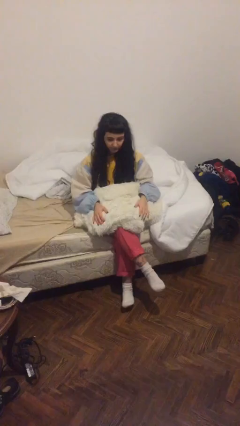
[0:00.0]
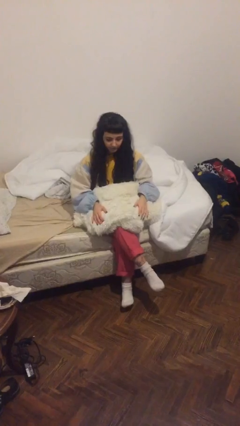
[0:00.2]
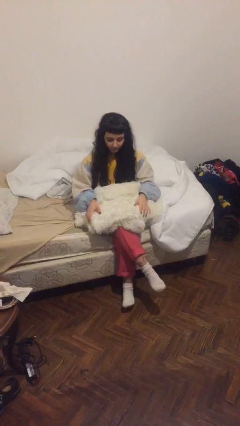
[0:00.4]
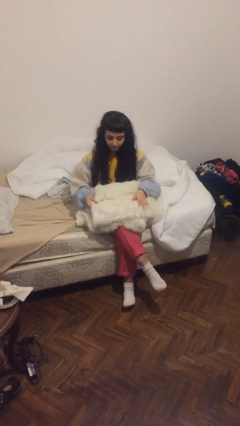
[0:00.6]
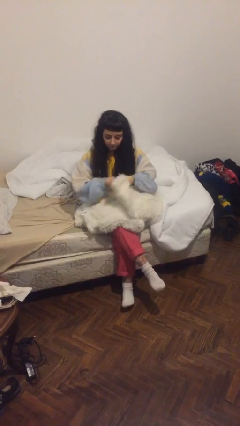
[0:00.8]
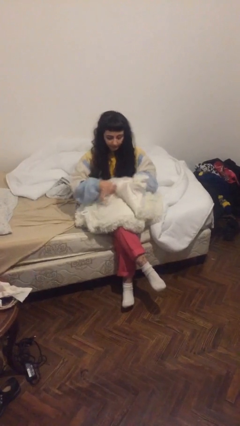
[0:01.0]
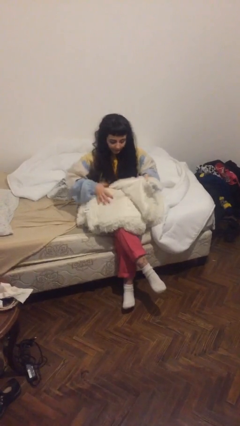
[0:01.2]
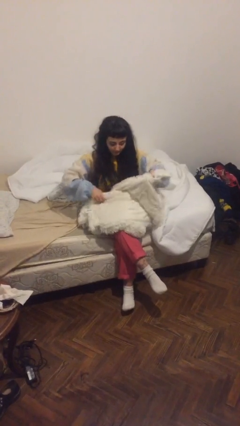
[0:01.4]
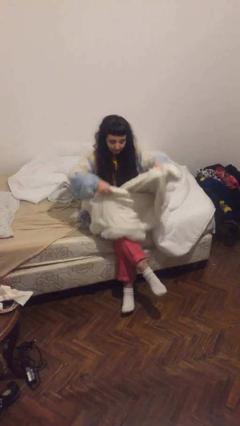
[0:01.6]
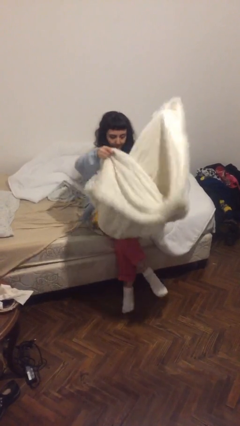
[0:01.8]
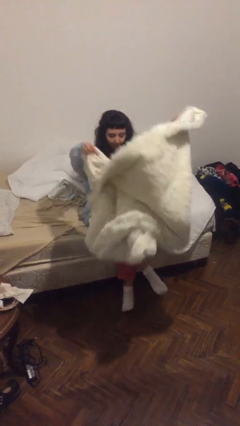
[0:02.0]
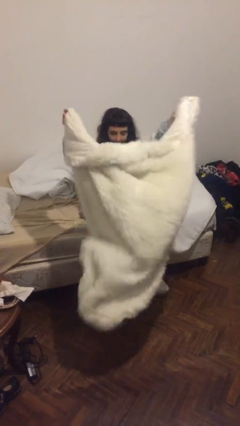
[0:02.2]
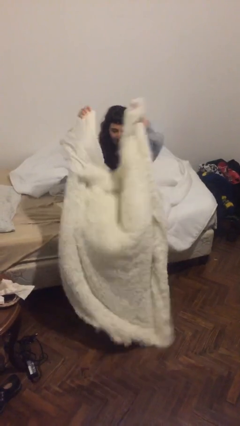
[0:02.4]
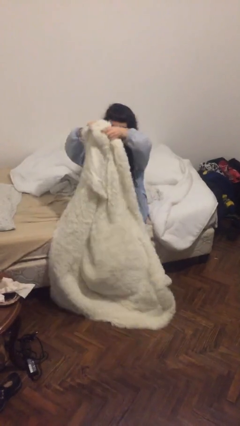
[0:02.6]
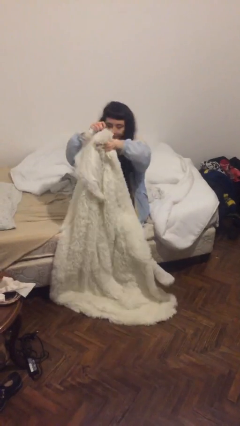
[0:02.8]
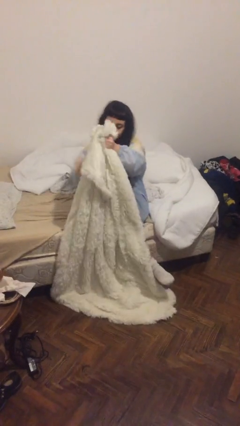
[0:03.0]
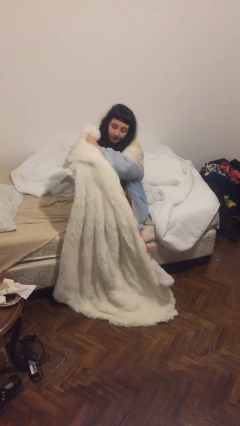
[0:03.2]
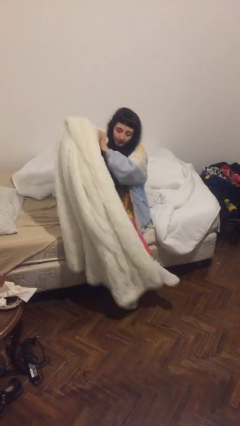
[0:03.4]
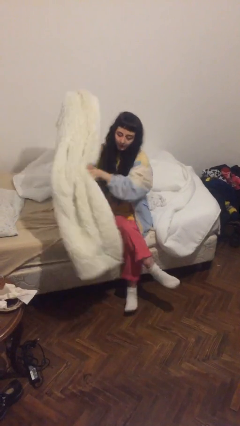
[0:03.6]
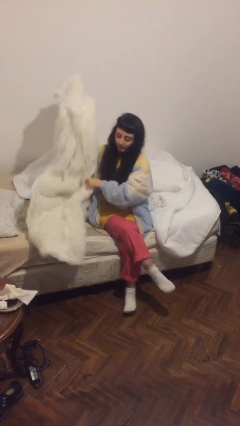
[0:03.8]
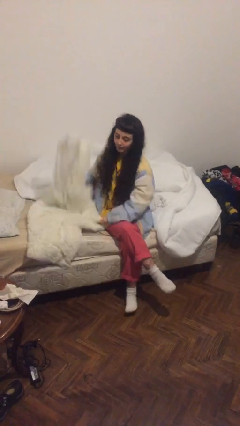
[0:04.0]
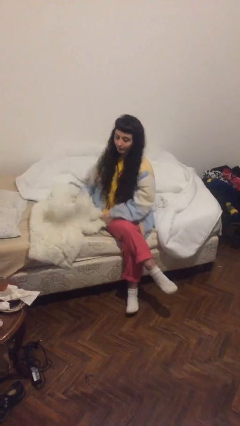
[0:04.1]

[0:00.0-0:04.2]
person unfolds blanket

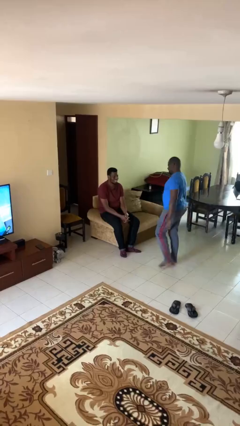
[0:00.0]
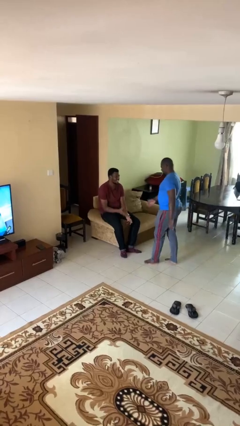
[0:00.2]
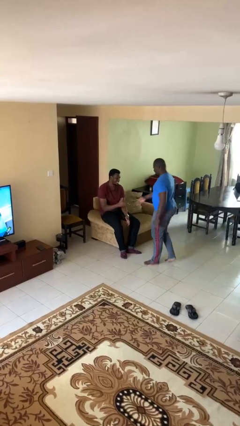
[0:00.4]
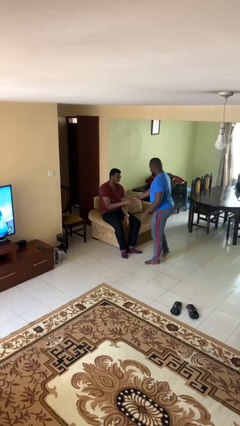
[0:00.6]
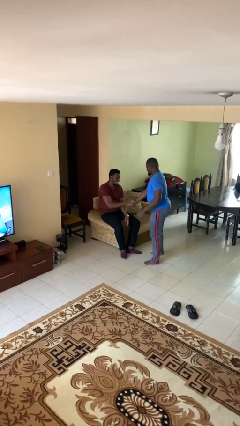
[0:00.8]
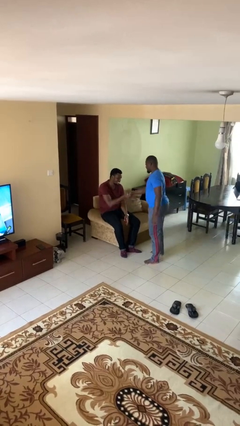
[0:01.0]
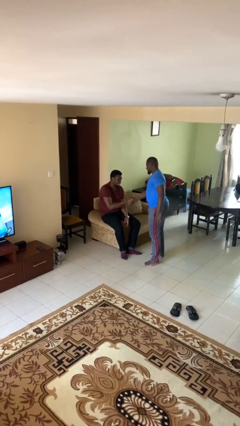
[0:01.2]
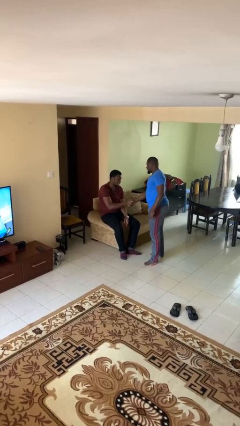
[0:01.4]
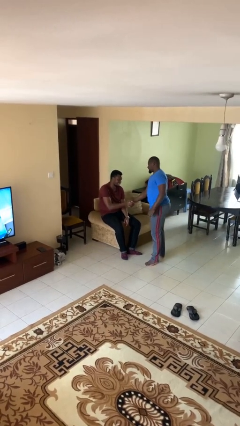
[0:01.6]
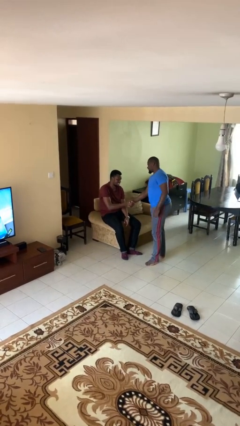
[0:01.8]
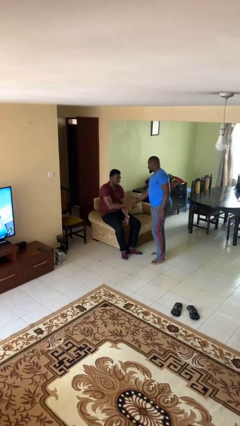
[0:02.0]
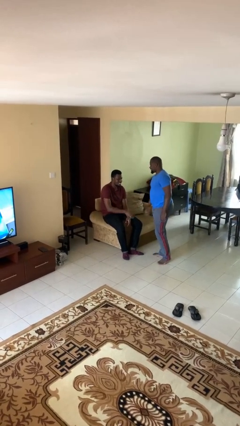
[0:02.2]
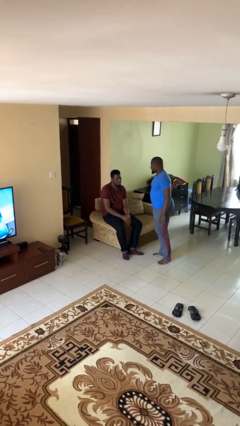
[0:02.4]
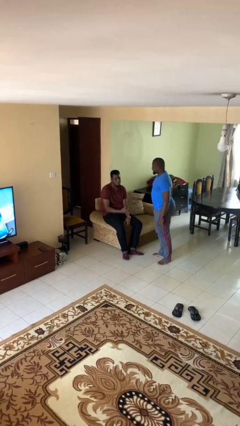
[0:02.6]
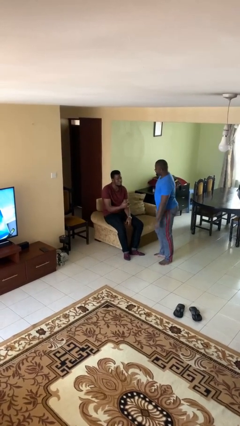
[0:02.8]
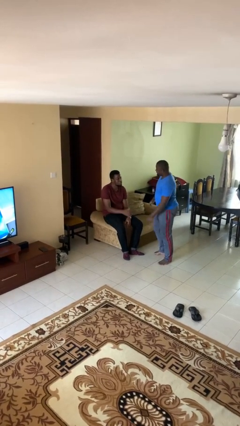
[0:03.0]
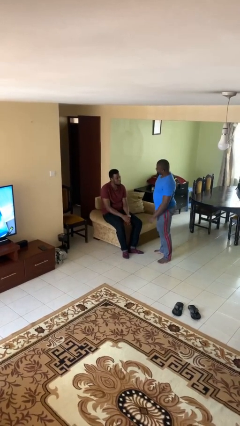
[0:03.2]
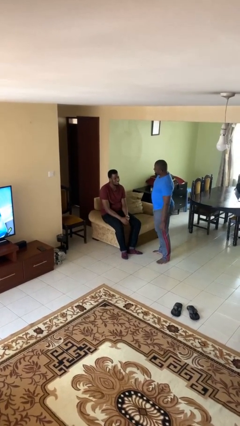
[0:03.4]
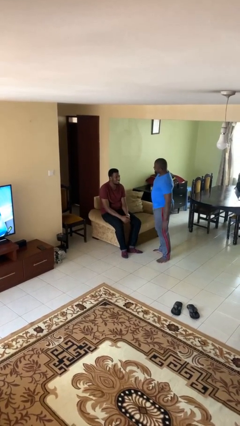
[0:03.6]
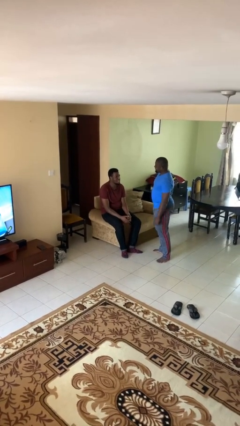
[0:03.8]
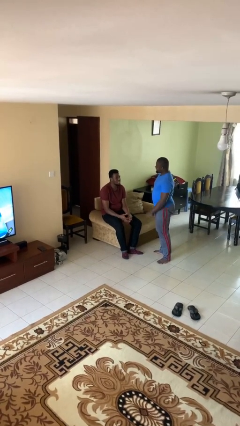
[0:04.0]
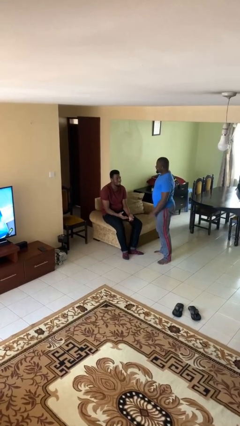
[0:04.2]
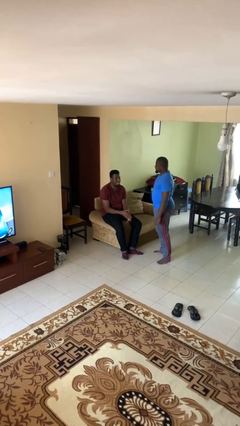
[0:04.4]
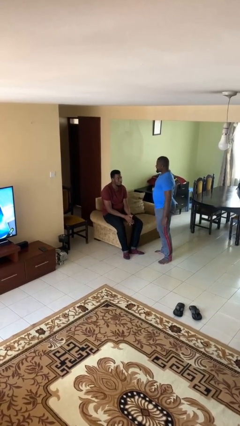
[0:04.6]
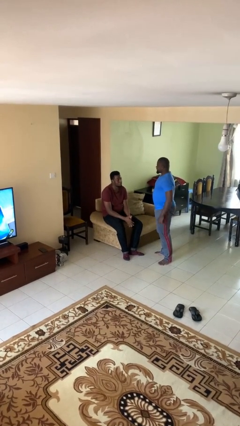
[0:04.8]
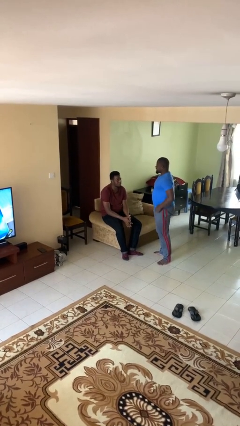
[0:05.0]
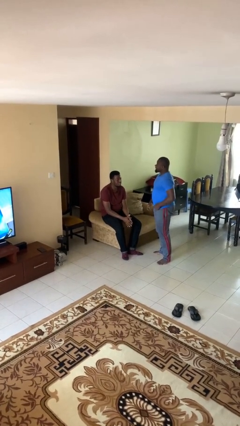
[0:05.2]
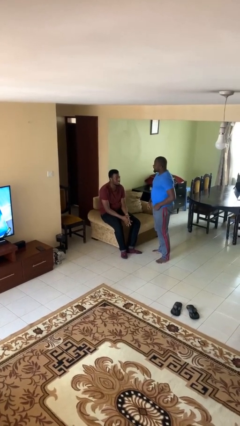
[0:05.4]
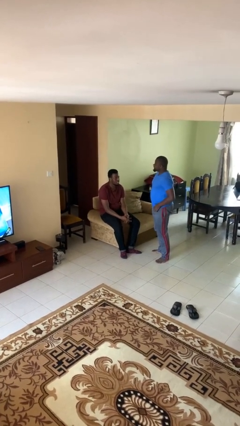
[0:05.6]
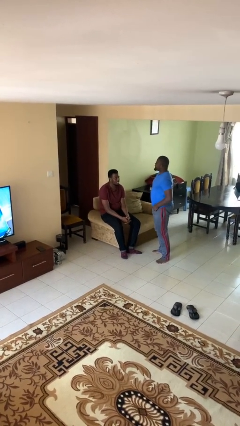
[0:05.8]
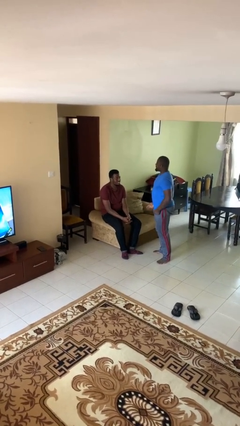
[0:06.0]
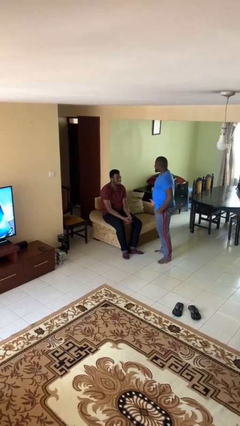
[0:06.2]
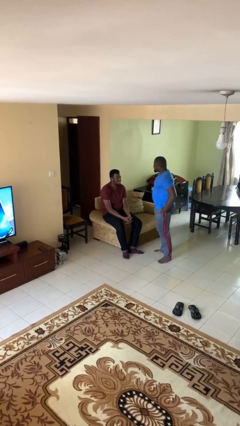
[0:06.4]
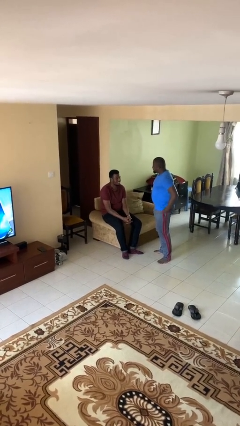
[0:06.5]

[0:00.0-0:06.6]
person shakes hand

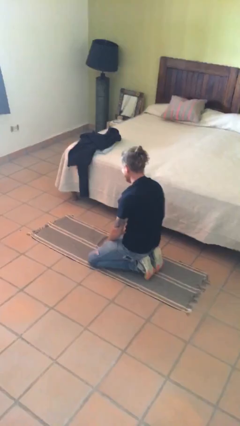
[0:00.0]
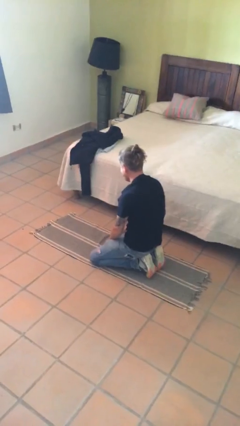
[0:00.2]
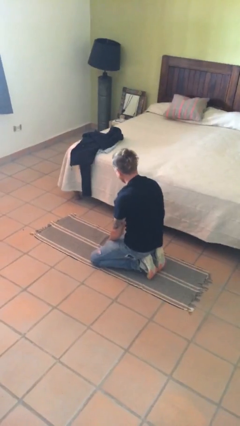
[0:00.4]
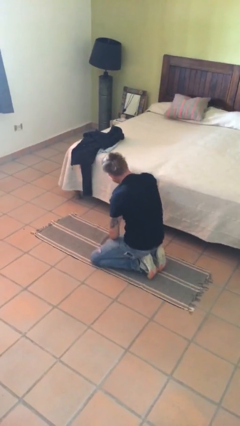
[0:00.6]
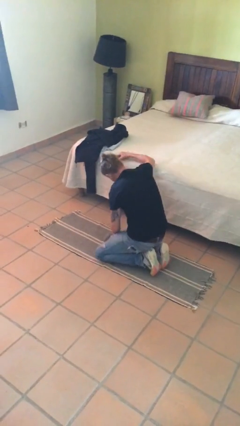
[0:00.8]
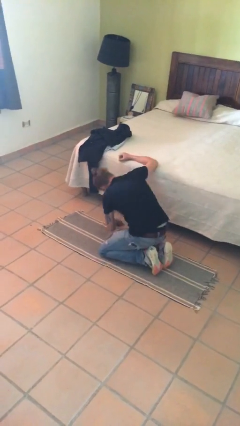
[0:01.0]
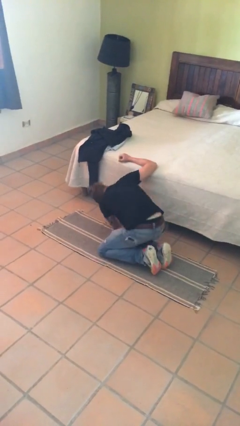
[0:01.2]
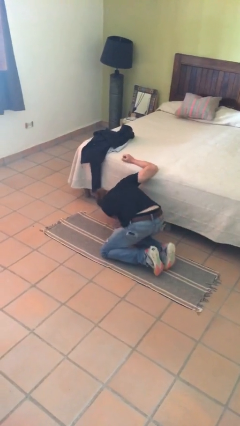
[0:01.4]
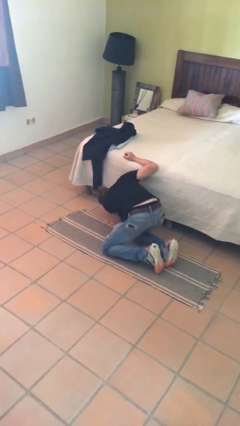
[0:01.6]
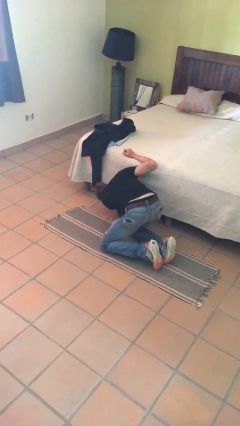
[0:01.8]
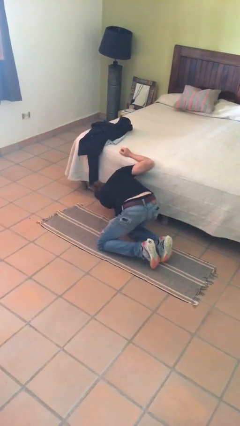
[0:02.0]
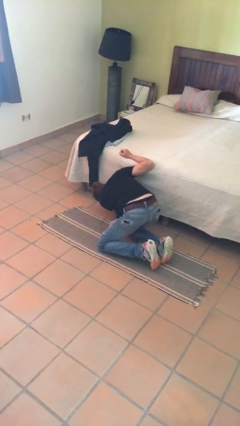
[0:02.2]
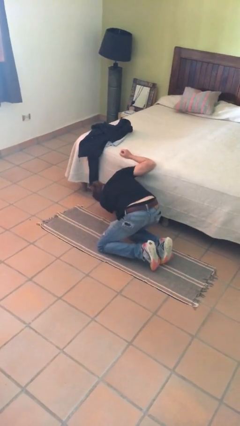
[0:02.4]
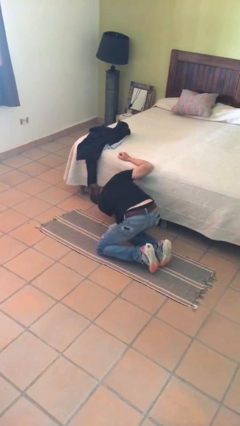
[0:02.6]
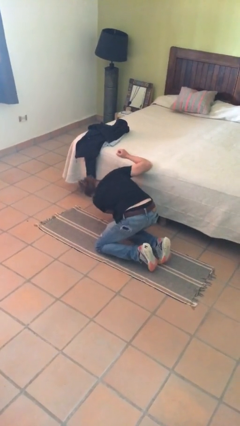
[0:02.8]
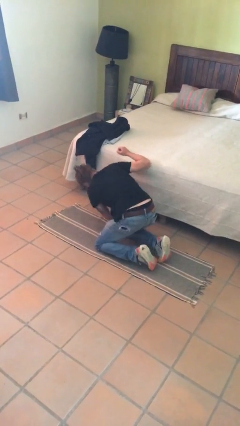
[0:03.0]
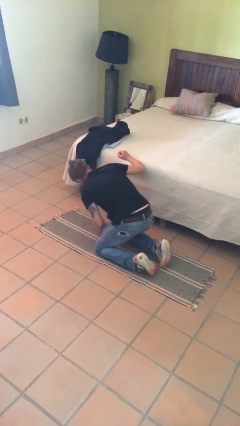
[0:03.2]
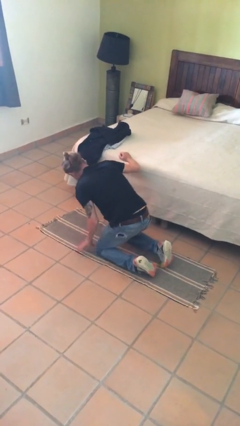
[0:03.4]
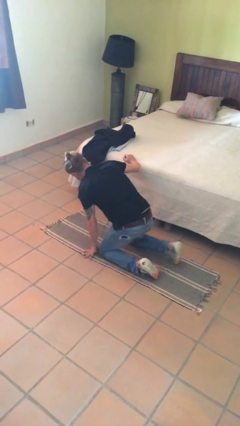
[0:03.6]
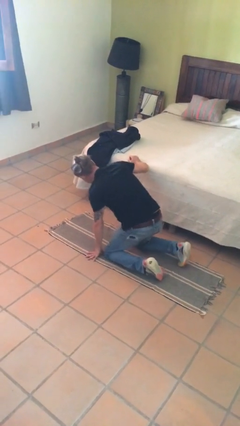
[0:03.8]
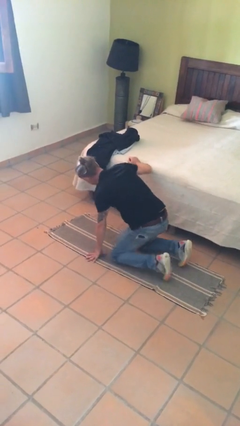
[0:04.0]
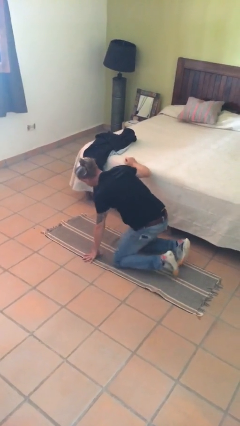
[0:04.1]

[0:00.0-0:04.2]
person searches under bed

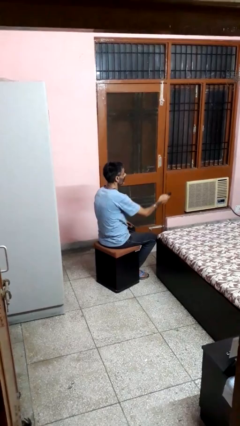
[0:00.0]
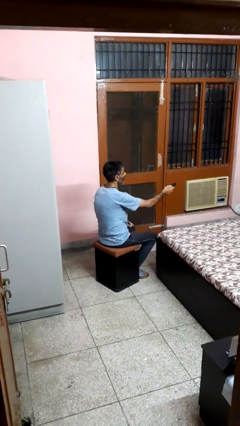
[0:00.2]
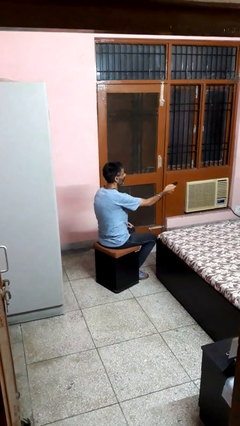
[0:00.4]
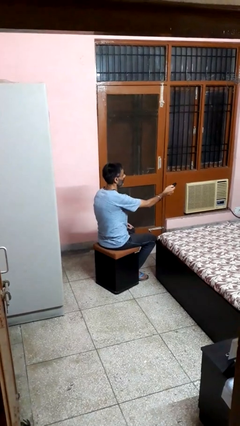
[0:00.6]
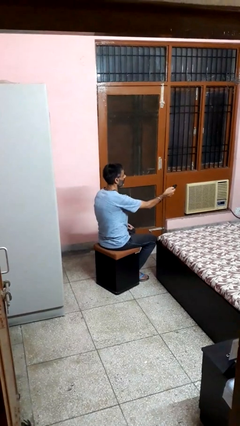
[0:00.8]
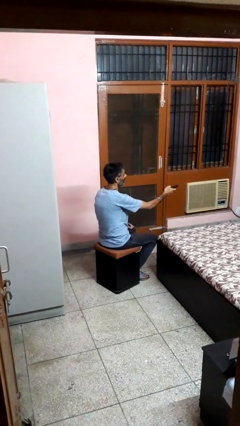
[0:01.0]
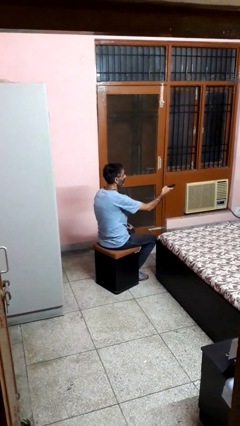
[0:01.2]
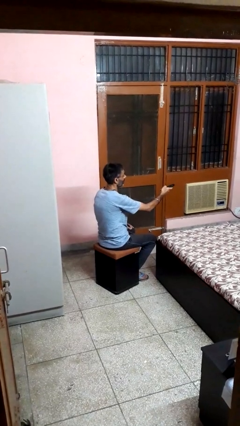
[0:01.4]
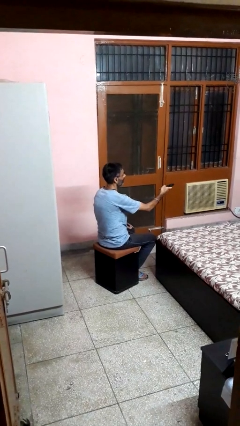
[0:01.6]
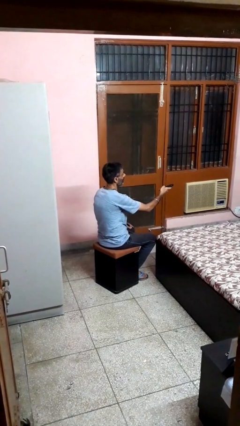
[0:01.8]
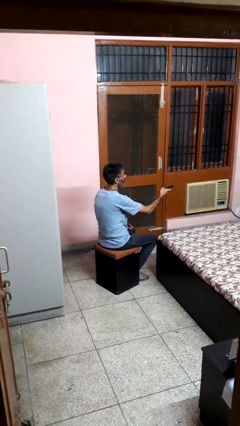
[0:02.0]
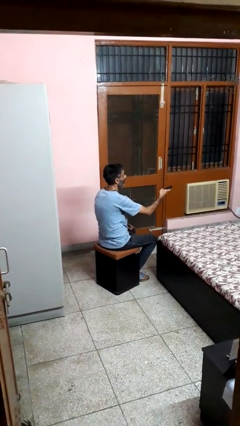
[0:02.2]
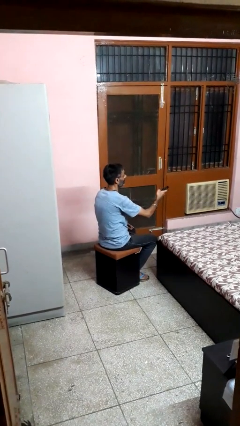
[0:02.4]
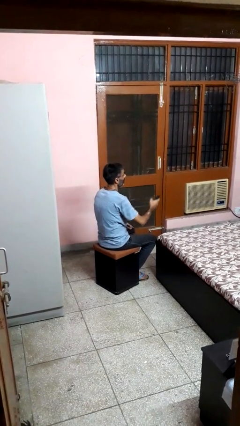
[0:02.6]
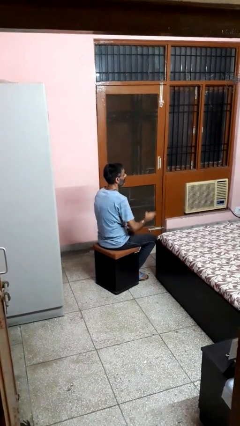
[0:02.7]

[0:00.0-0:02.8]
person uses television remote
